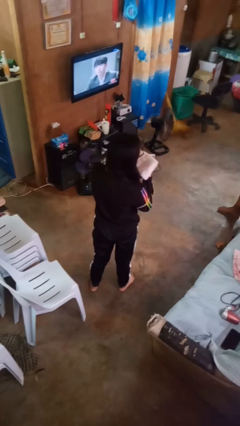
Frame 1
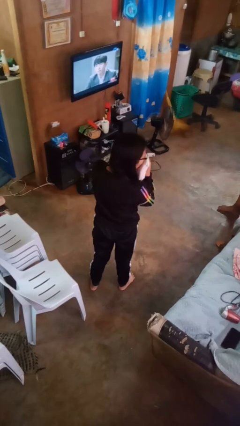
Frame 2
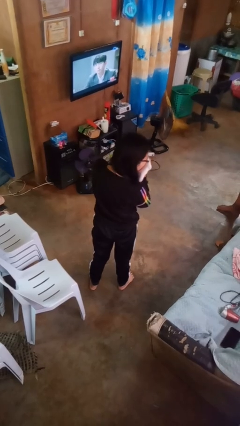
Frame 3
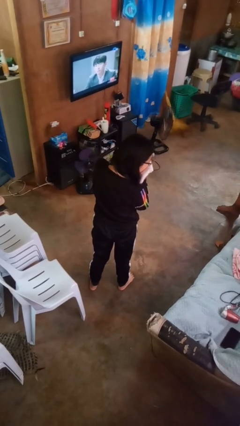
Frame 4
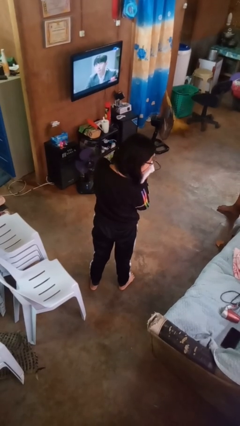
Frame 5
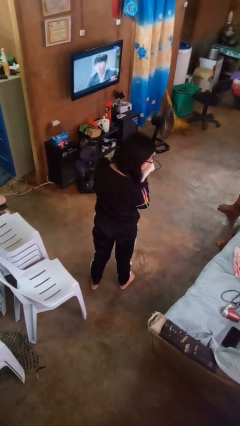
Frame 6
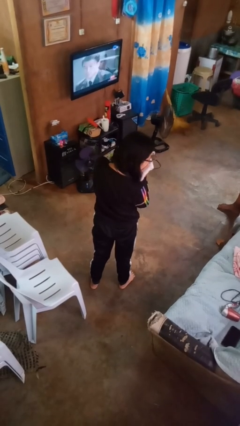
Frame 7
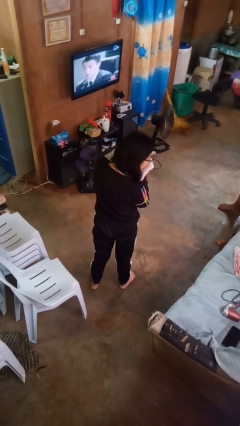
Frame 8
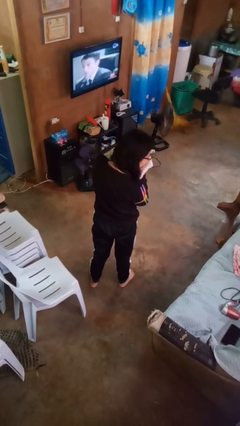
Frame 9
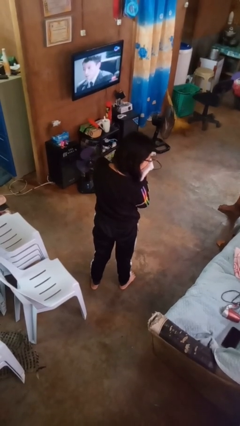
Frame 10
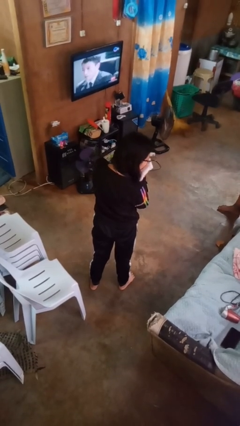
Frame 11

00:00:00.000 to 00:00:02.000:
person blows nose

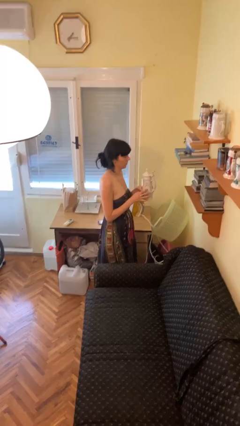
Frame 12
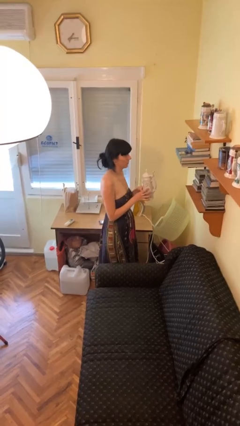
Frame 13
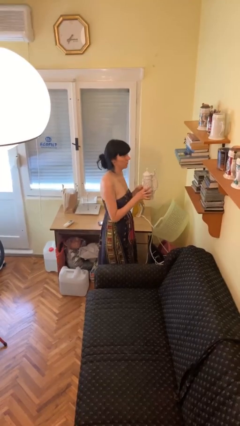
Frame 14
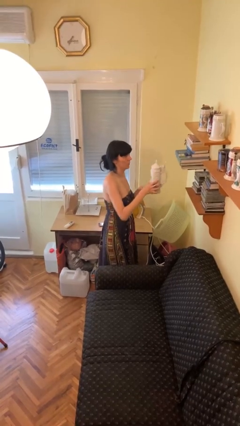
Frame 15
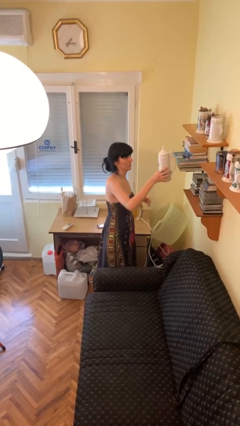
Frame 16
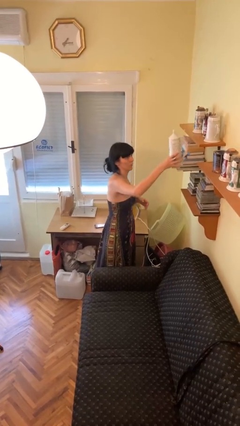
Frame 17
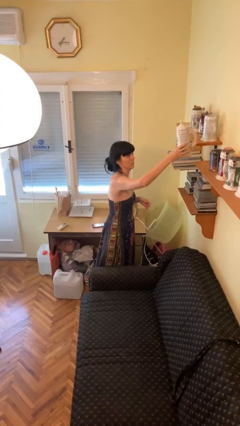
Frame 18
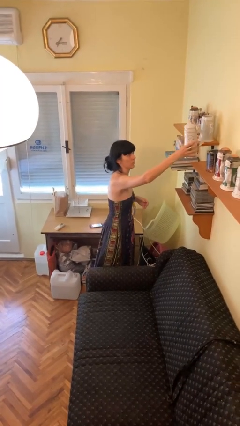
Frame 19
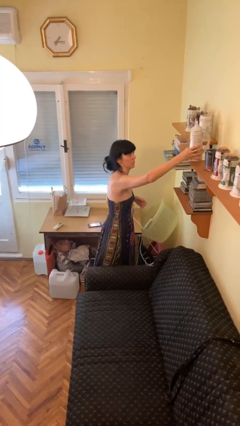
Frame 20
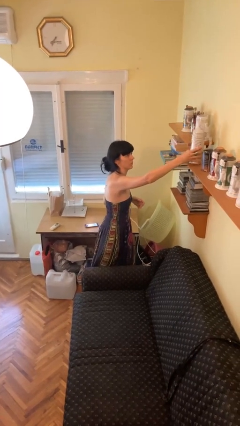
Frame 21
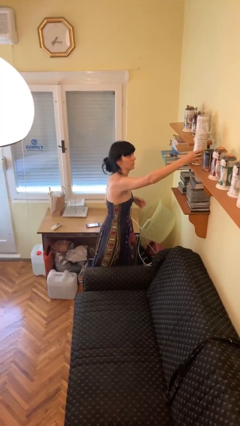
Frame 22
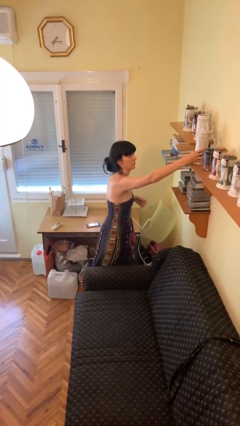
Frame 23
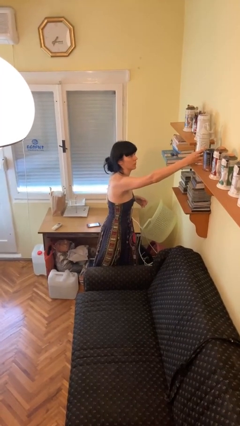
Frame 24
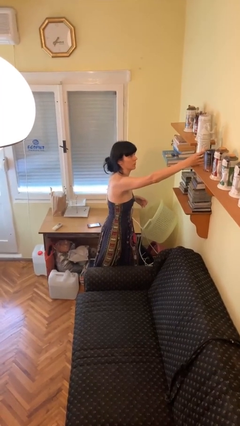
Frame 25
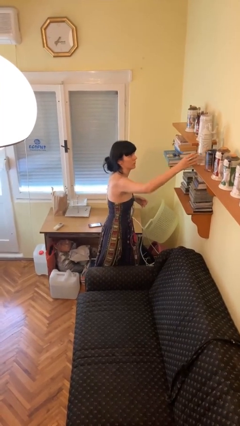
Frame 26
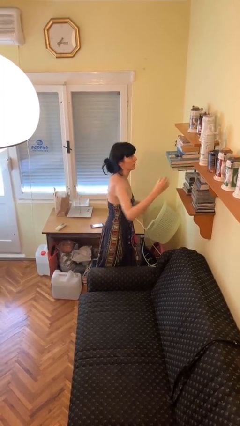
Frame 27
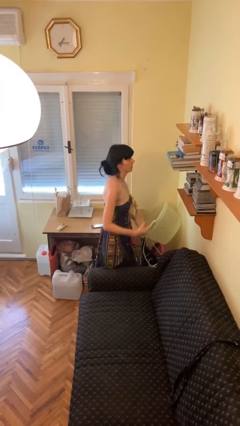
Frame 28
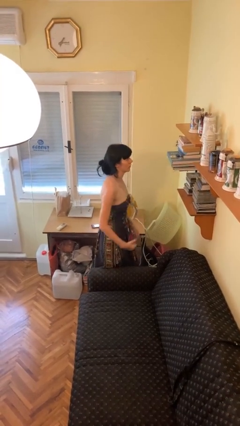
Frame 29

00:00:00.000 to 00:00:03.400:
person puts down object on shelf

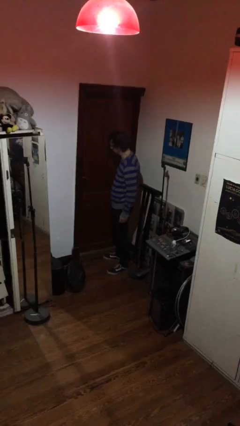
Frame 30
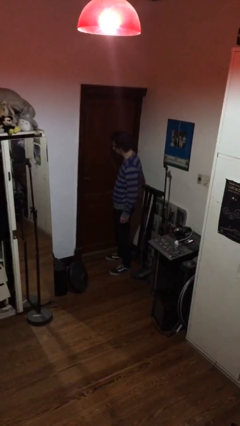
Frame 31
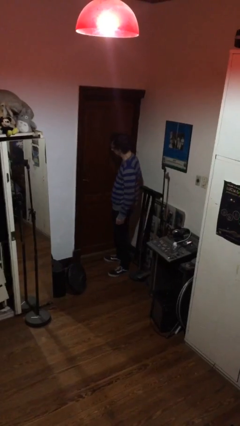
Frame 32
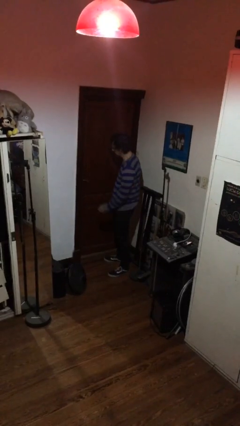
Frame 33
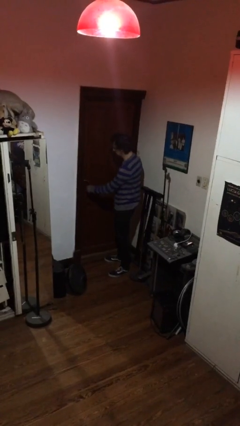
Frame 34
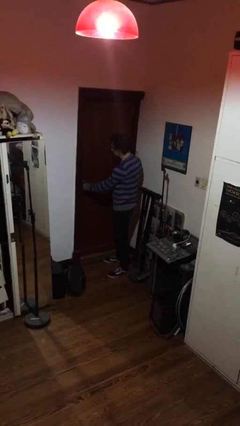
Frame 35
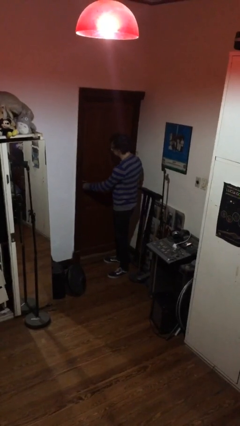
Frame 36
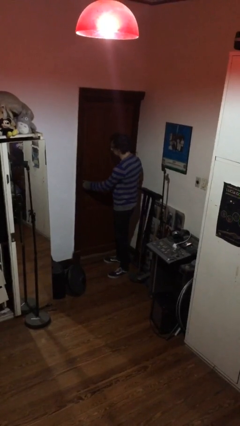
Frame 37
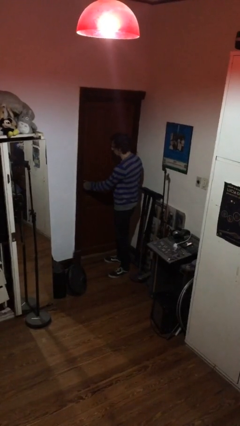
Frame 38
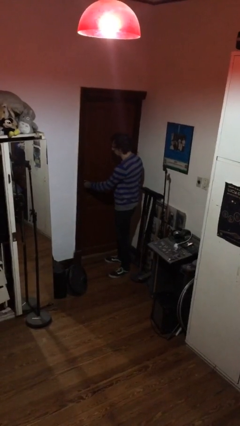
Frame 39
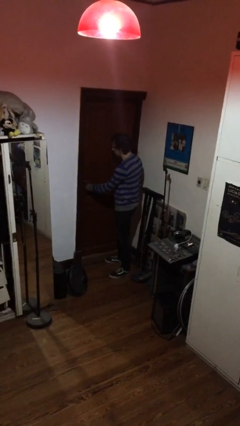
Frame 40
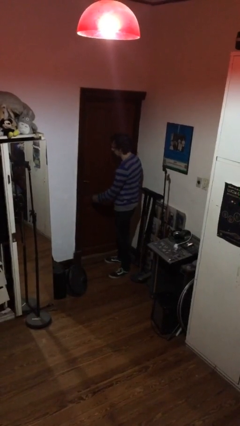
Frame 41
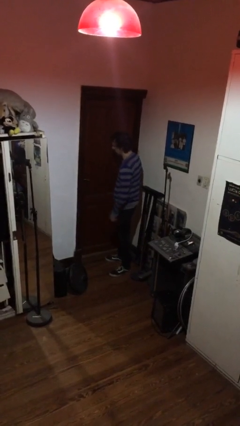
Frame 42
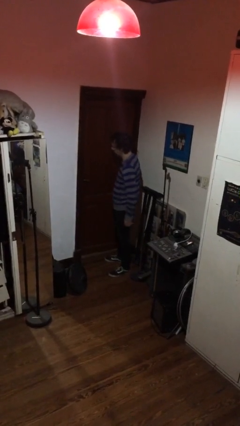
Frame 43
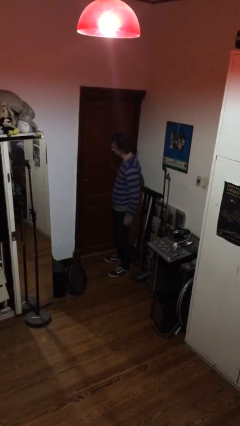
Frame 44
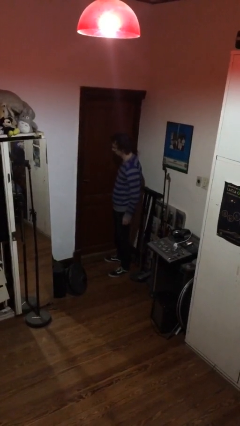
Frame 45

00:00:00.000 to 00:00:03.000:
person locks door with keys

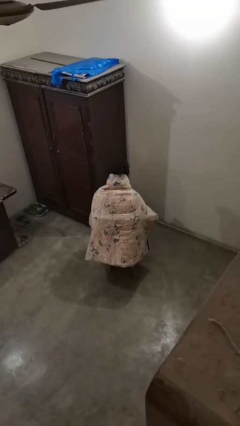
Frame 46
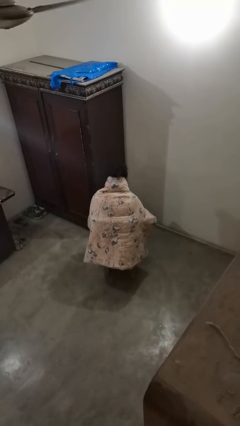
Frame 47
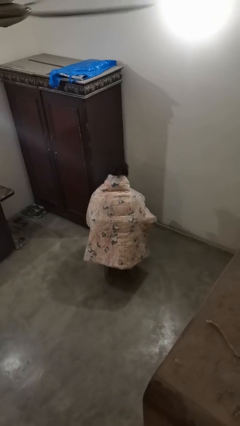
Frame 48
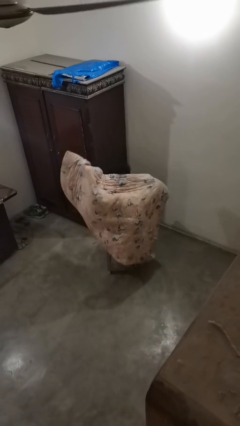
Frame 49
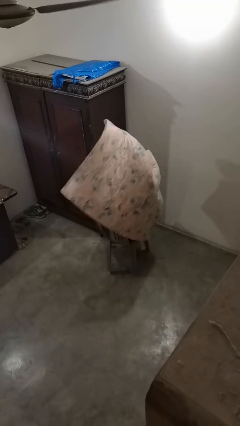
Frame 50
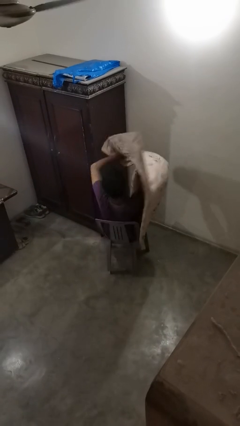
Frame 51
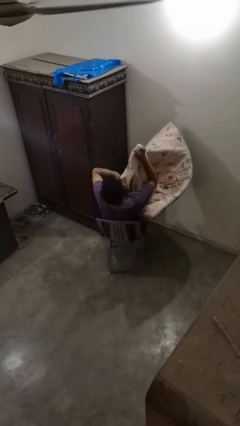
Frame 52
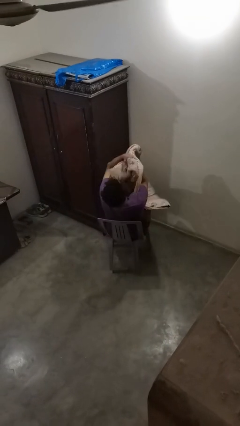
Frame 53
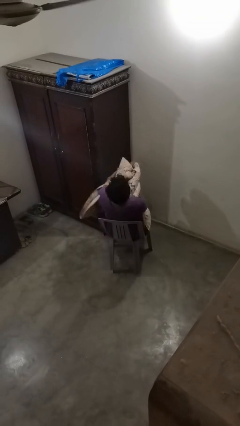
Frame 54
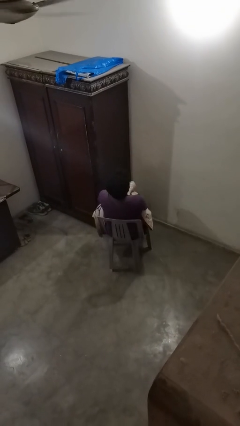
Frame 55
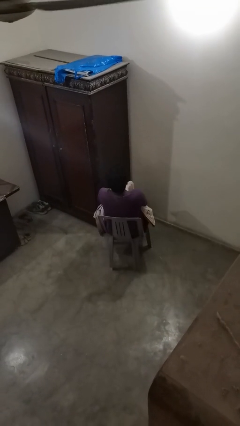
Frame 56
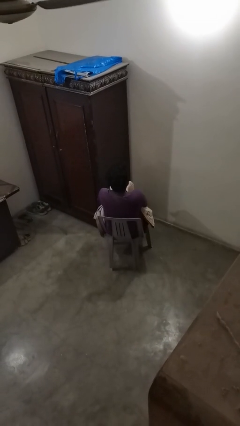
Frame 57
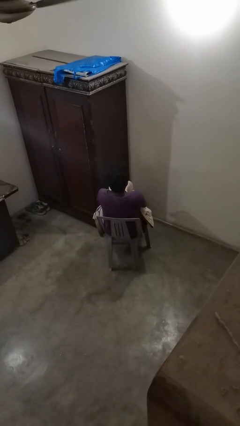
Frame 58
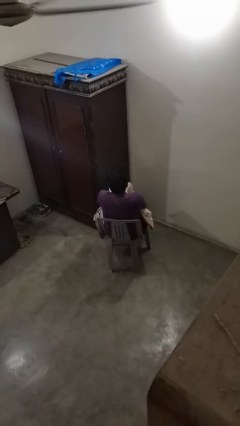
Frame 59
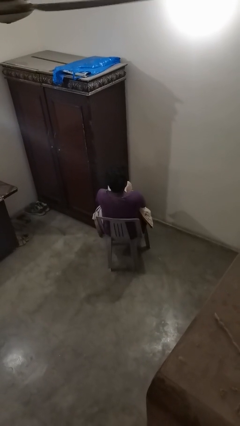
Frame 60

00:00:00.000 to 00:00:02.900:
person uncovers with blanket

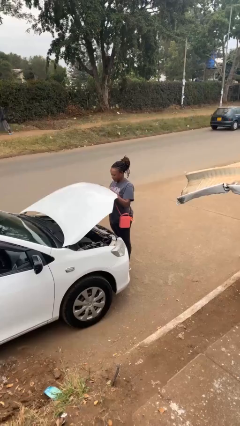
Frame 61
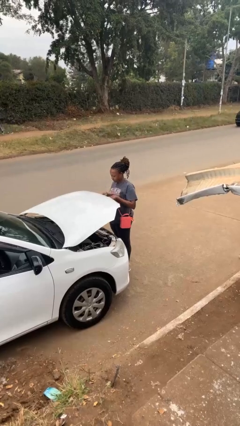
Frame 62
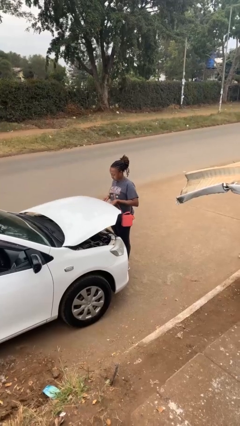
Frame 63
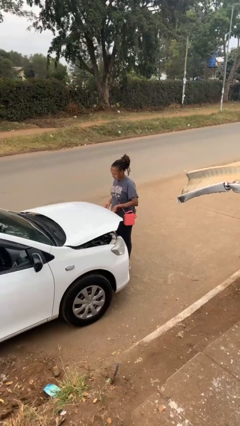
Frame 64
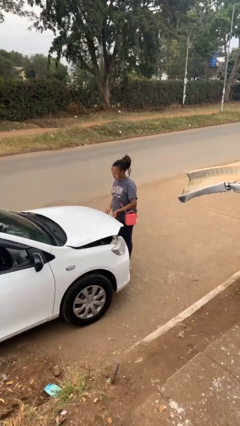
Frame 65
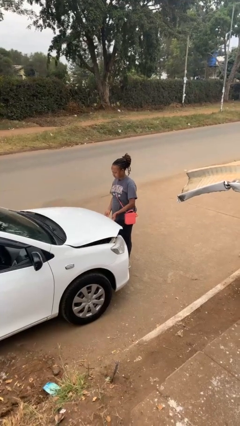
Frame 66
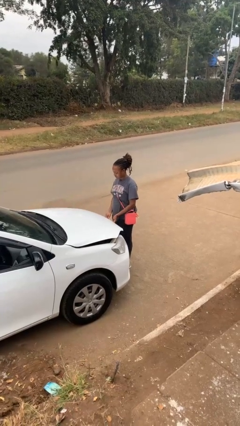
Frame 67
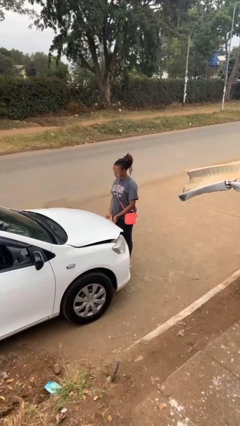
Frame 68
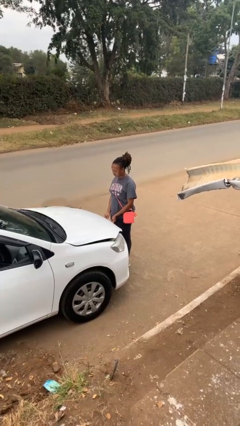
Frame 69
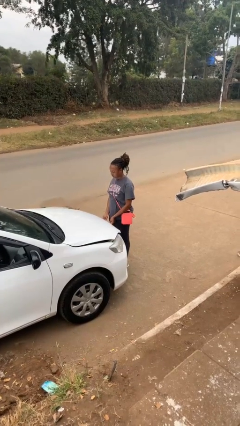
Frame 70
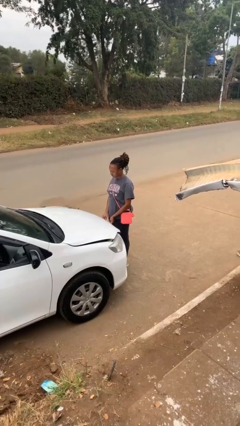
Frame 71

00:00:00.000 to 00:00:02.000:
person closes car hood

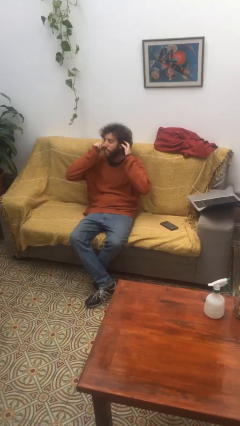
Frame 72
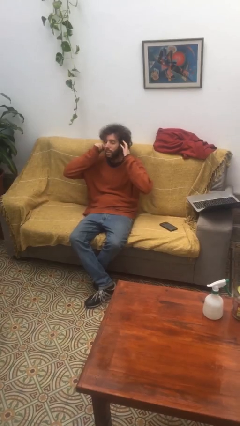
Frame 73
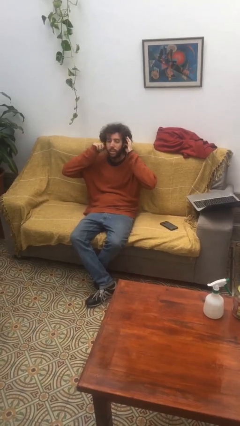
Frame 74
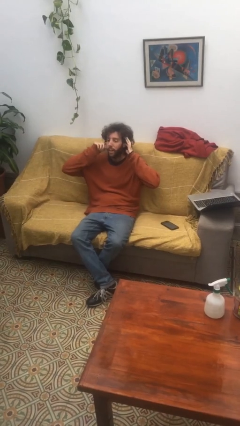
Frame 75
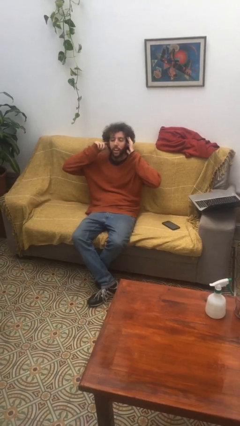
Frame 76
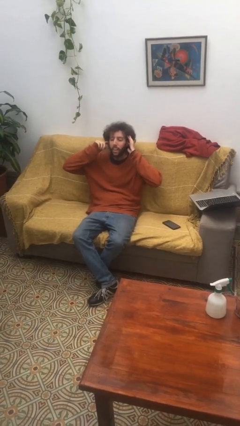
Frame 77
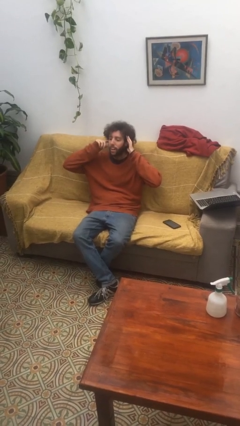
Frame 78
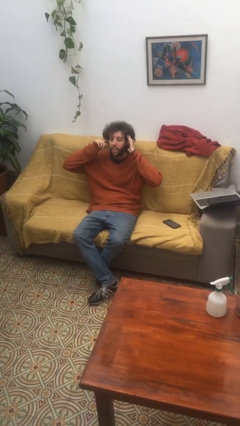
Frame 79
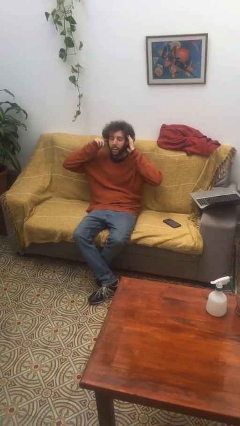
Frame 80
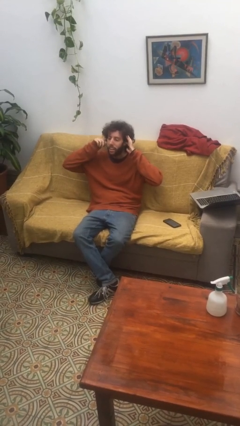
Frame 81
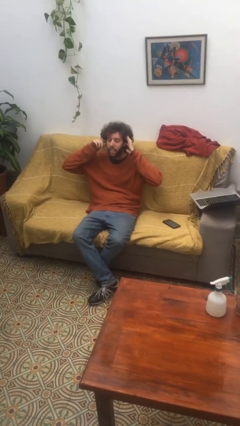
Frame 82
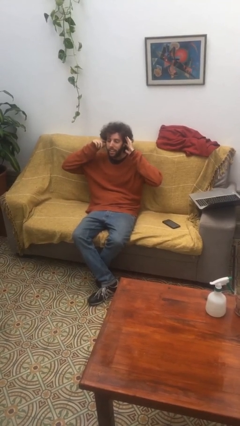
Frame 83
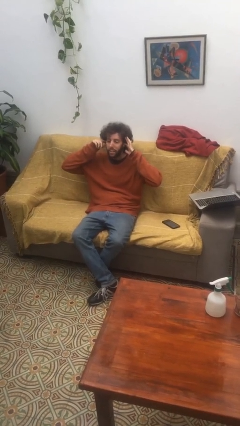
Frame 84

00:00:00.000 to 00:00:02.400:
person puts fingers in ear

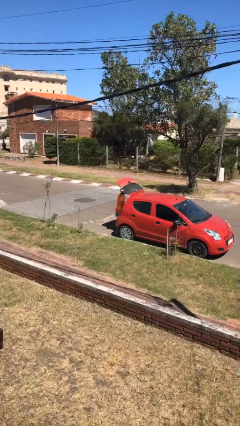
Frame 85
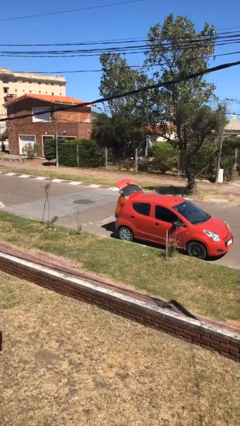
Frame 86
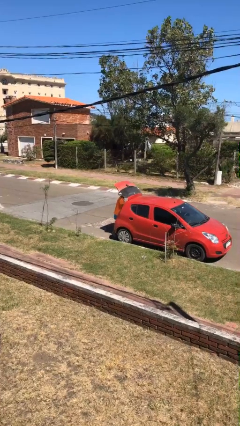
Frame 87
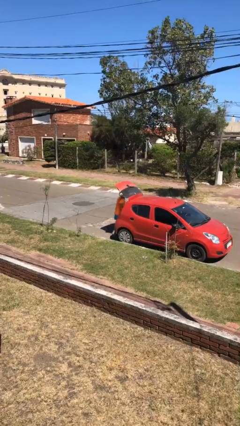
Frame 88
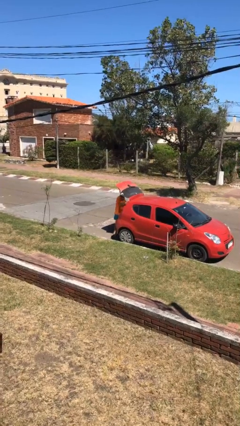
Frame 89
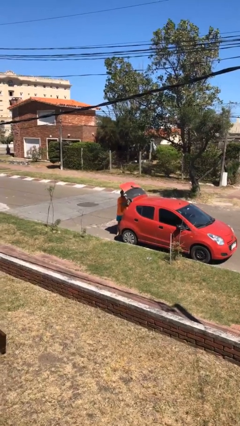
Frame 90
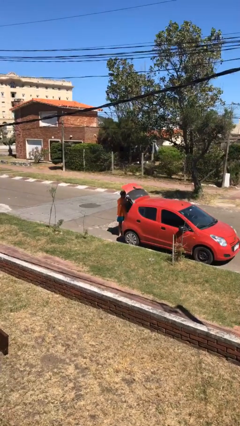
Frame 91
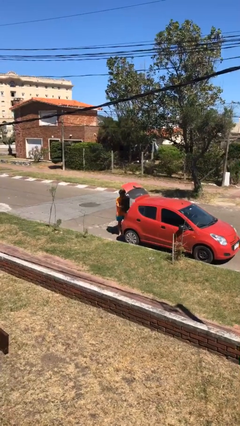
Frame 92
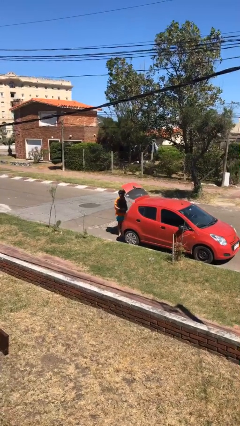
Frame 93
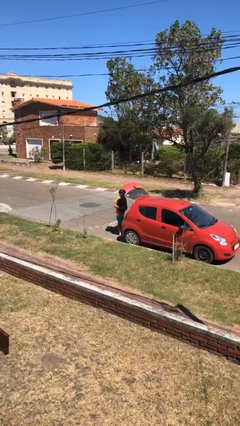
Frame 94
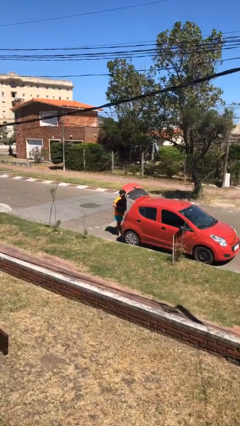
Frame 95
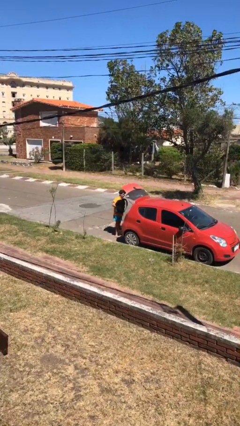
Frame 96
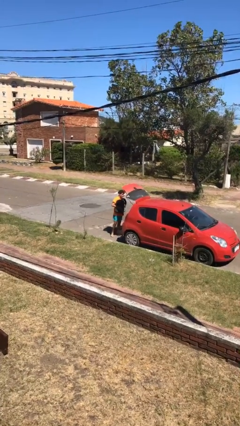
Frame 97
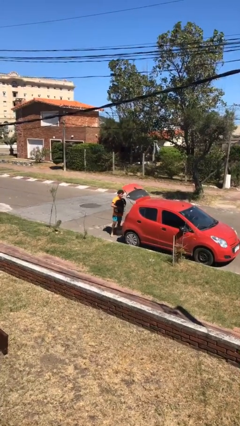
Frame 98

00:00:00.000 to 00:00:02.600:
person unloads car
